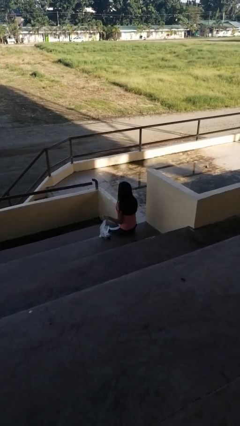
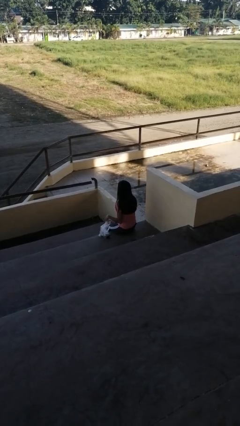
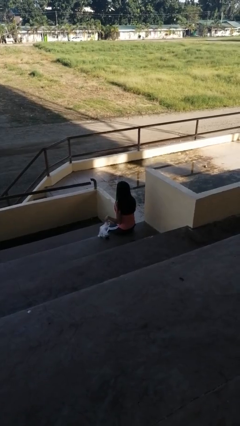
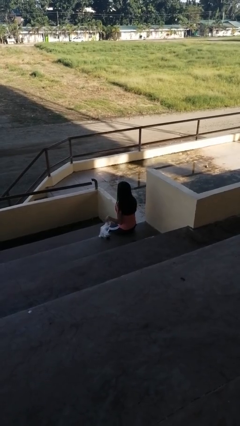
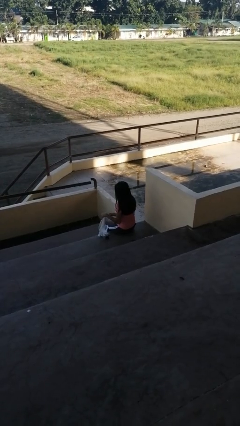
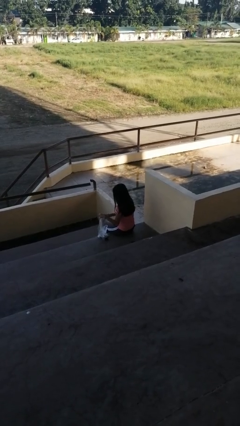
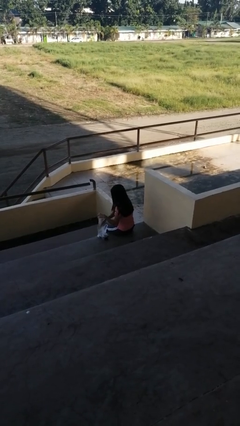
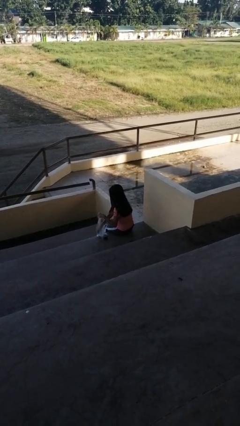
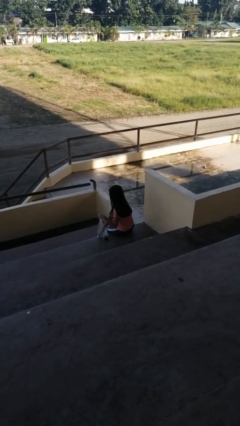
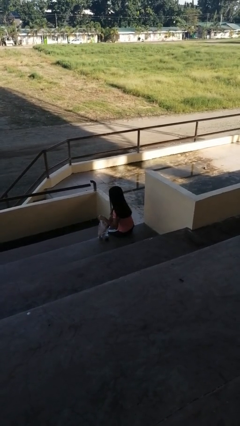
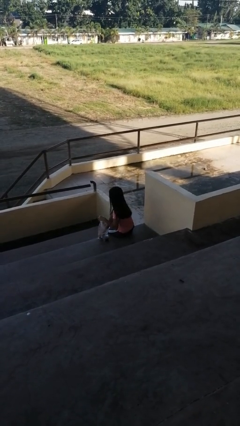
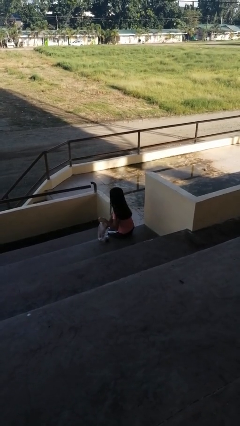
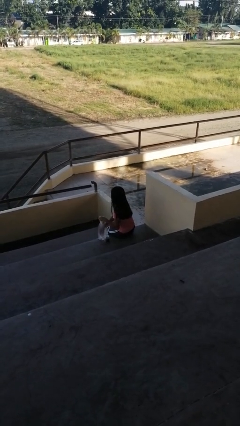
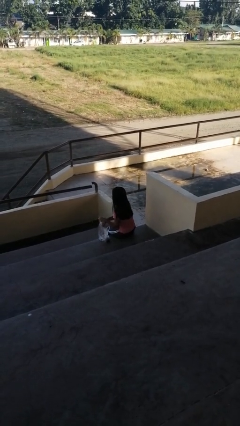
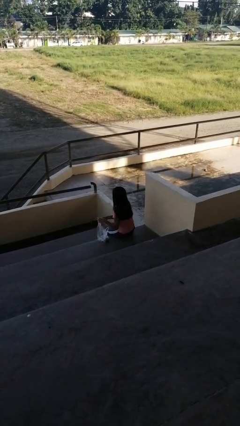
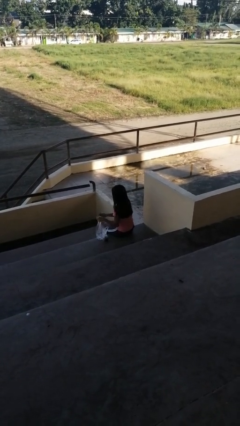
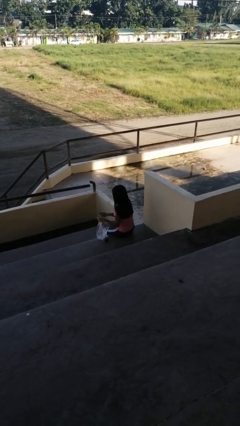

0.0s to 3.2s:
person takes object from bag

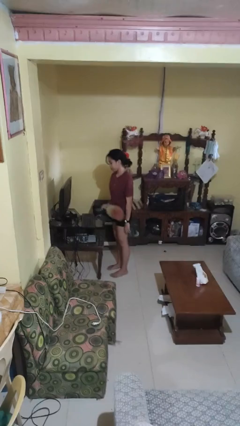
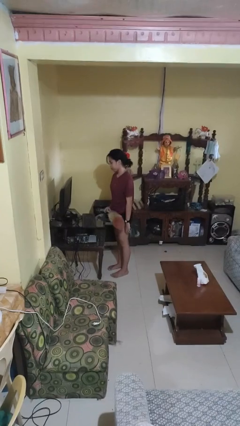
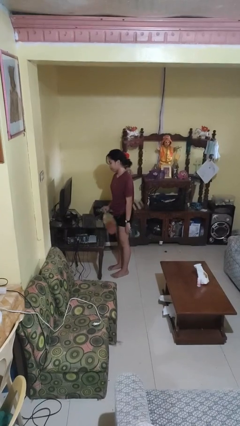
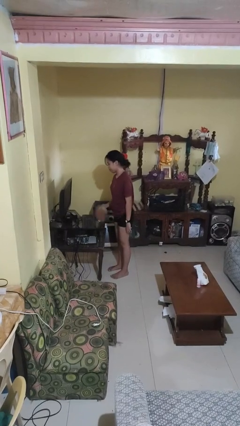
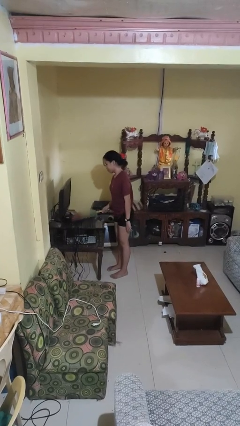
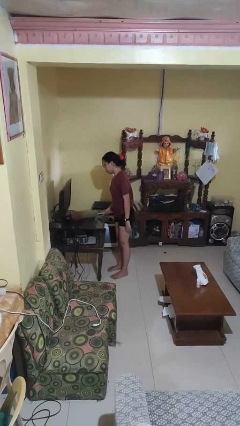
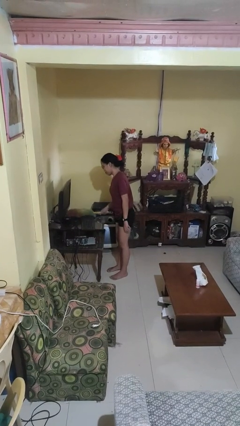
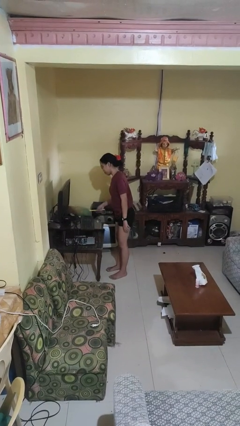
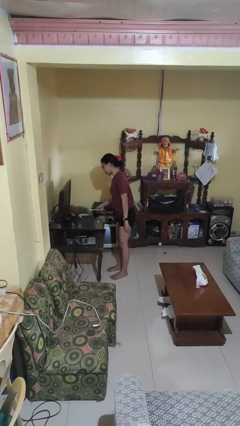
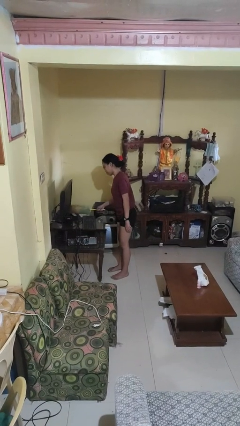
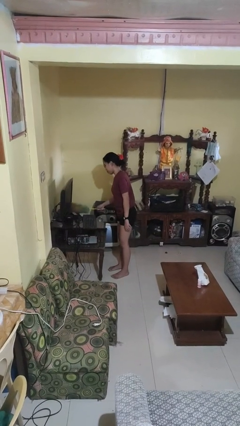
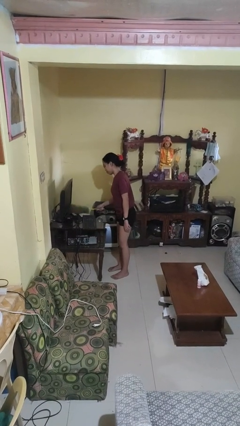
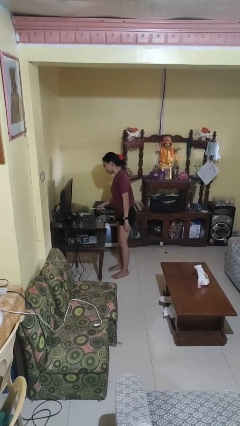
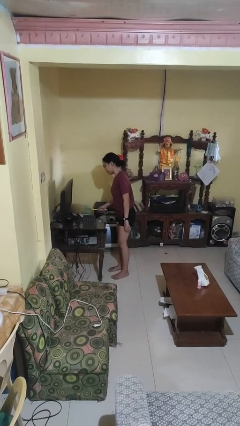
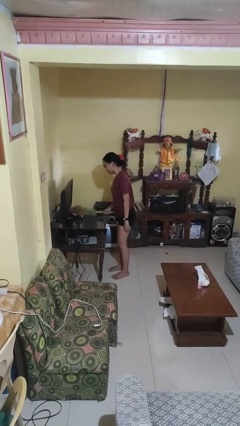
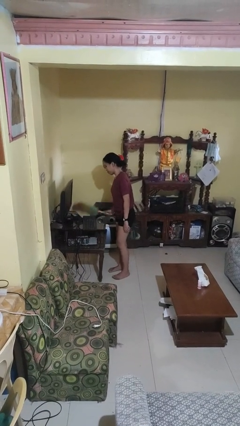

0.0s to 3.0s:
person dusts furniture

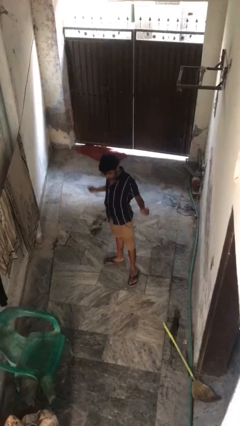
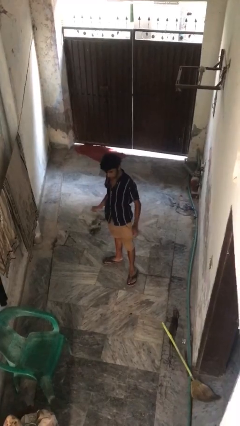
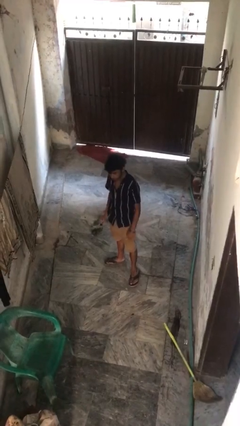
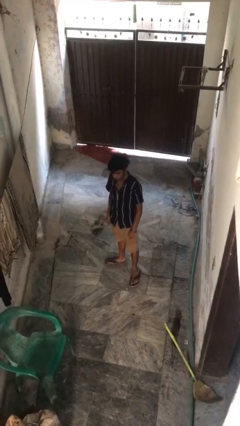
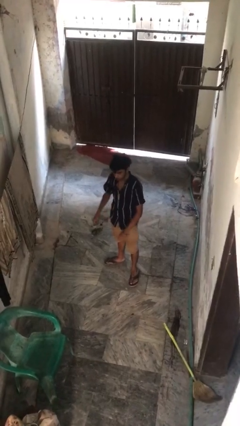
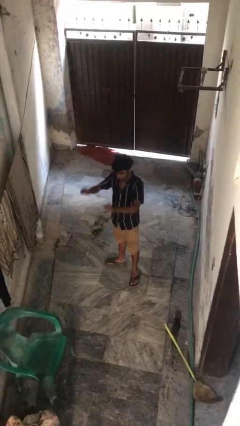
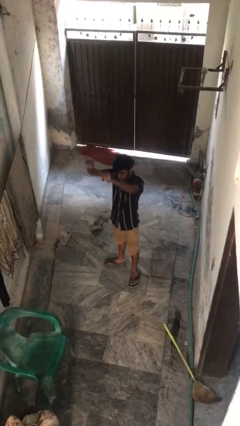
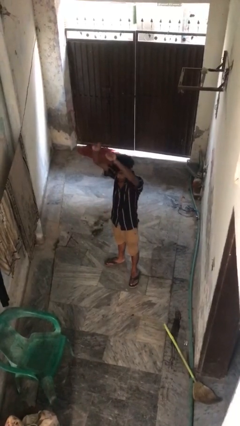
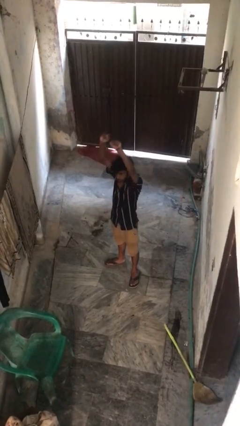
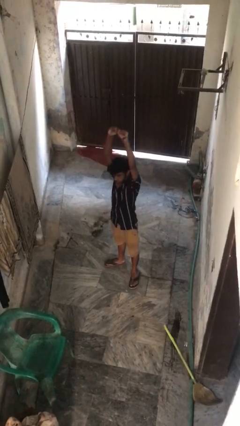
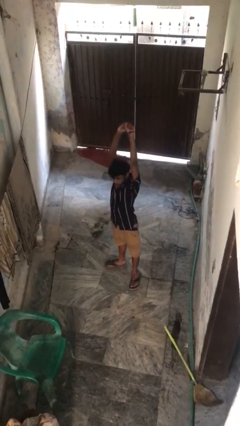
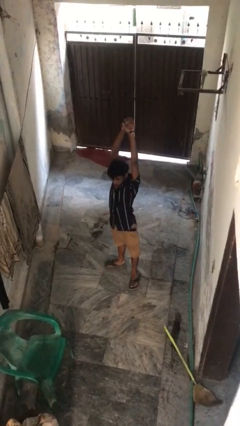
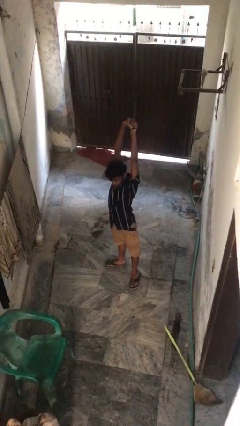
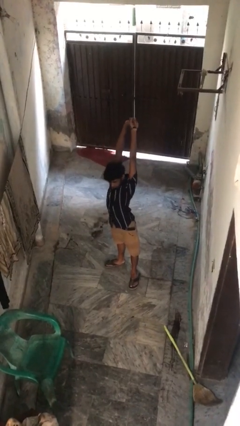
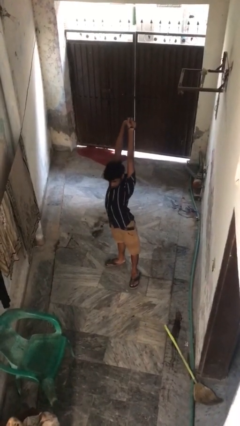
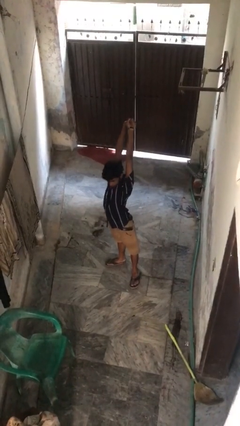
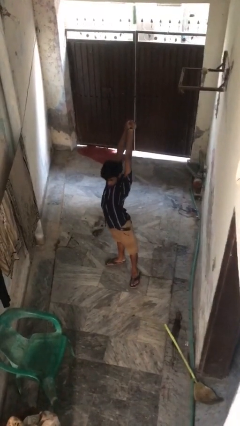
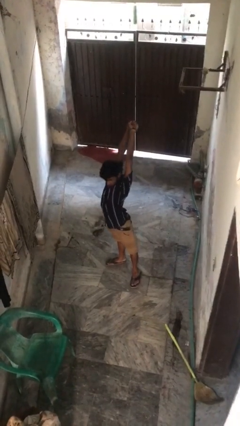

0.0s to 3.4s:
person stretches arms over head

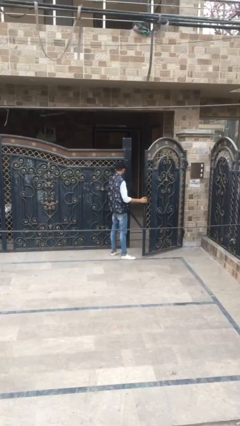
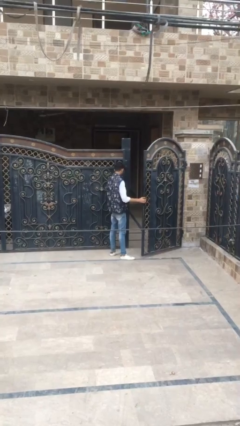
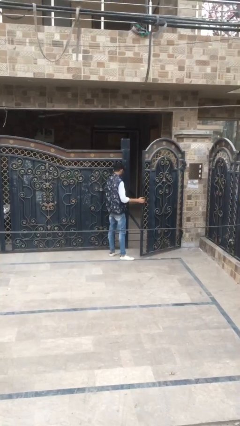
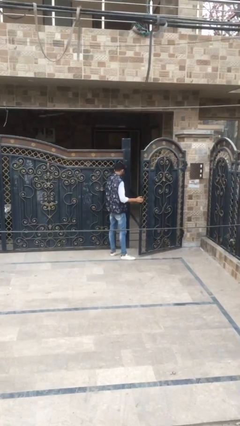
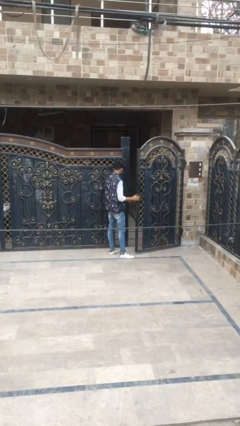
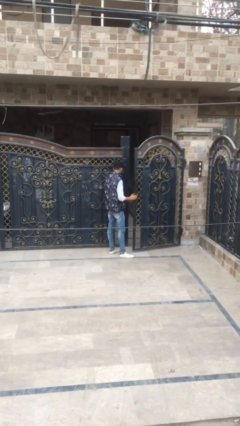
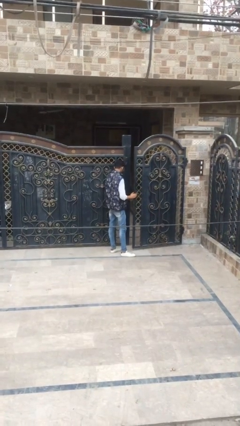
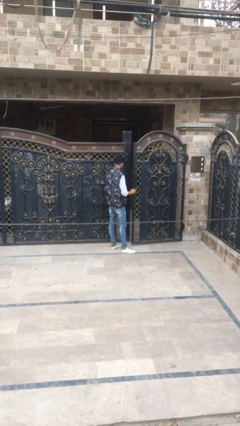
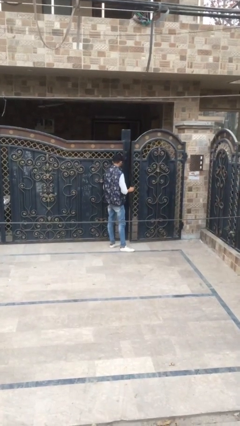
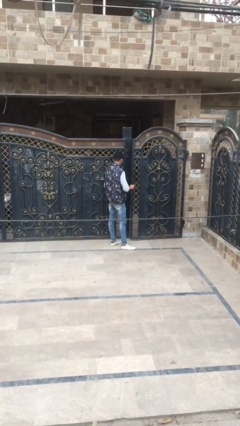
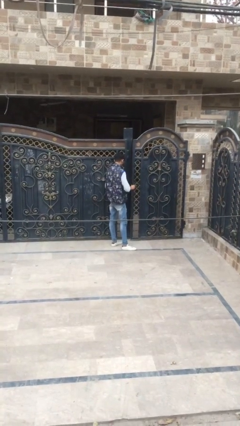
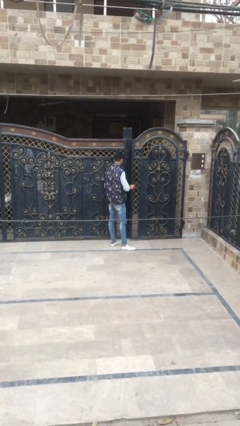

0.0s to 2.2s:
person closes facility door

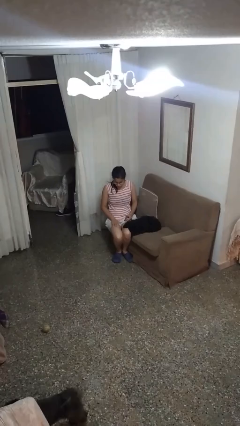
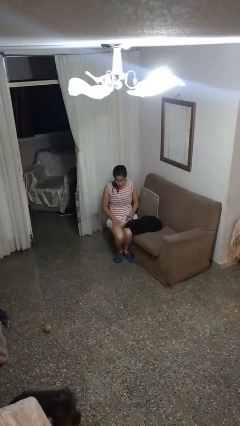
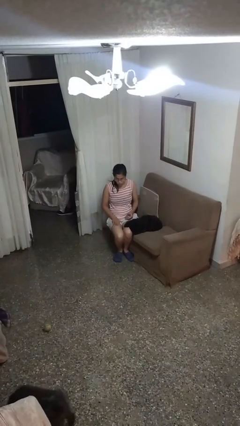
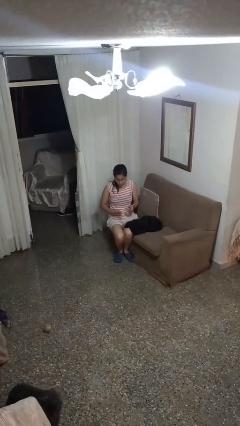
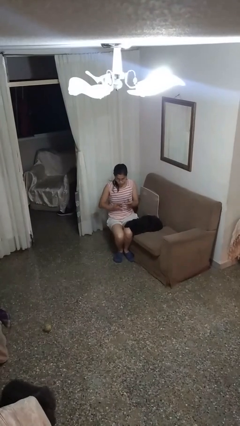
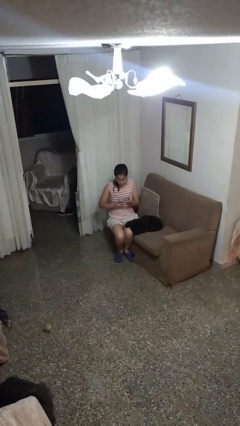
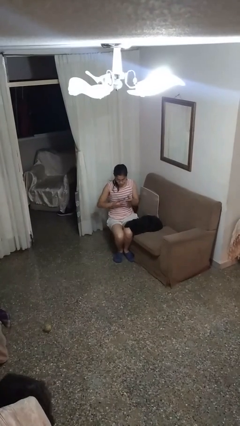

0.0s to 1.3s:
person clips fingernails

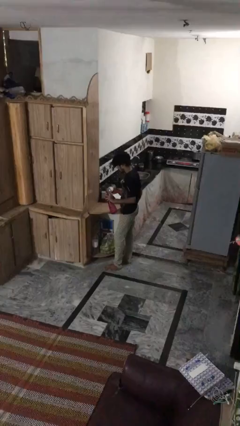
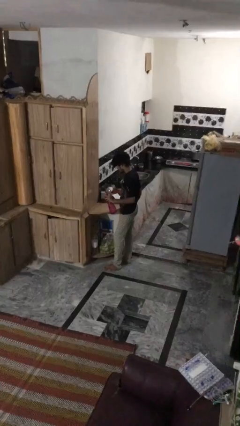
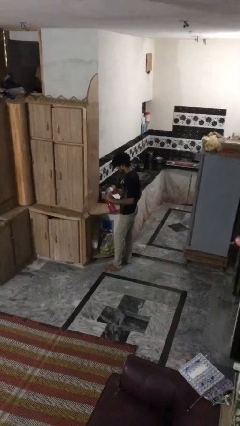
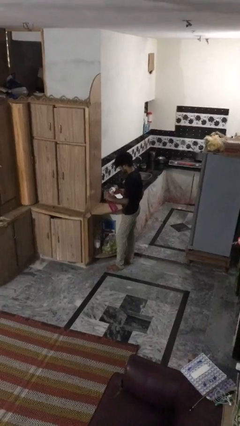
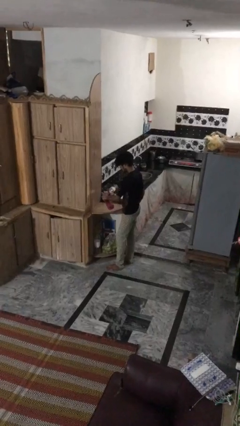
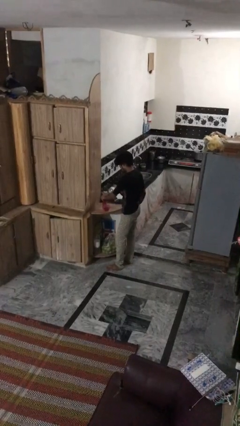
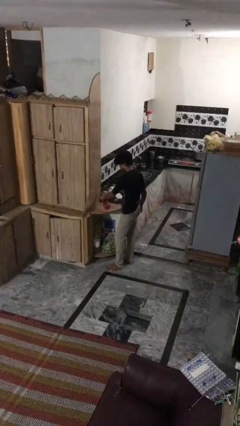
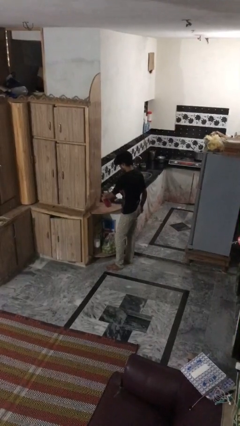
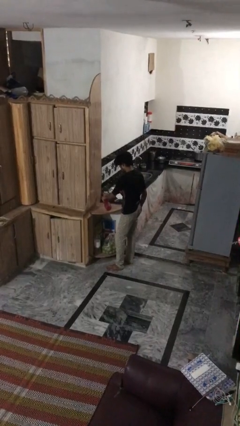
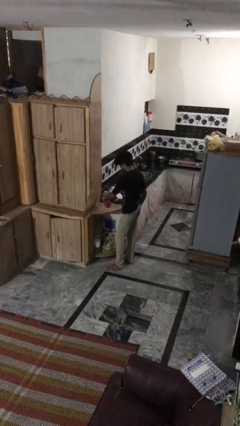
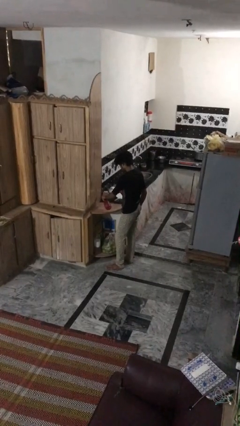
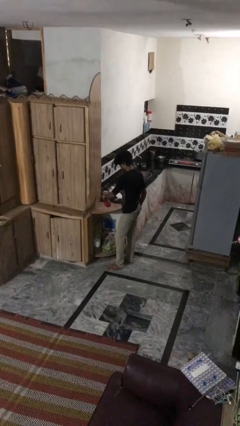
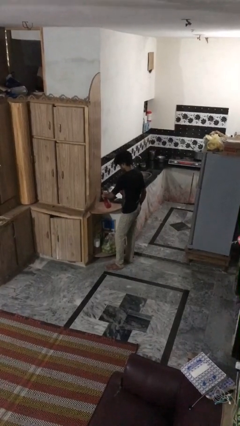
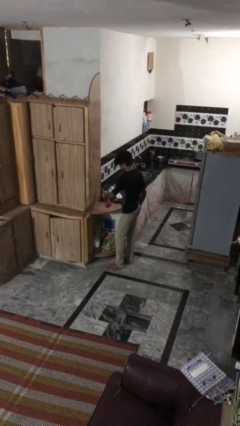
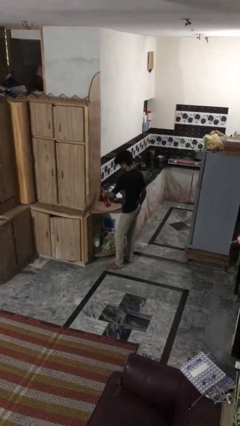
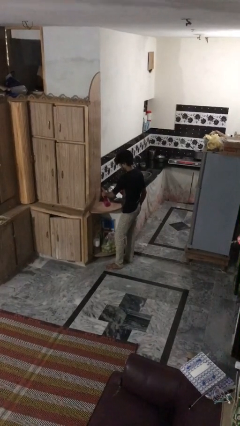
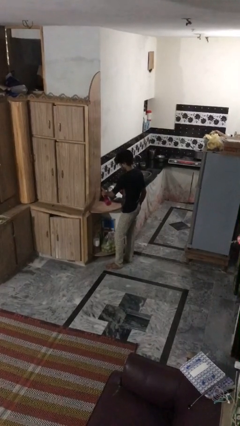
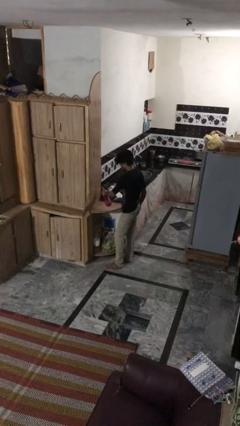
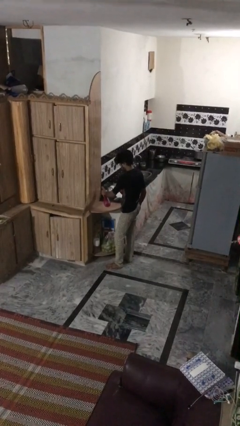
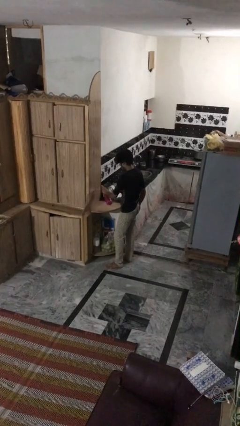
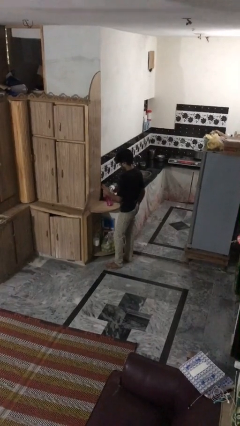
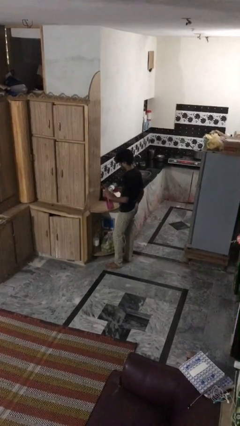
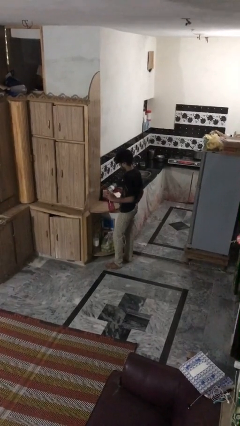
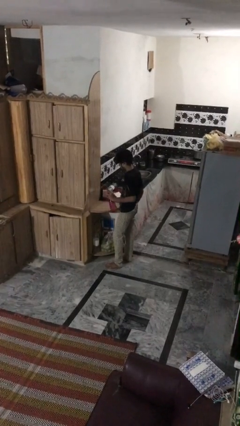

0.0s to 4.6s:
person sprays from bottle
